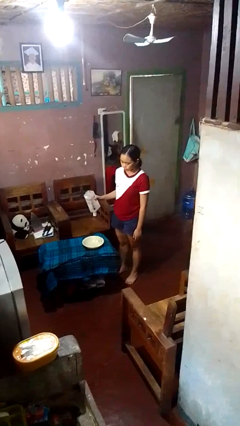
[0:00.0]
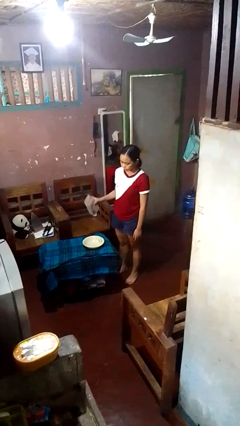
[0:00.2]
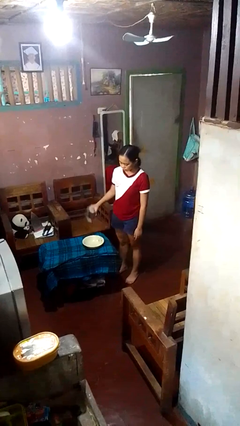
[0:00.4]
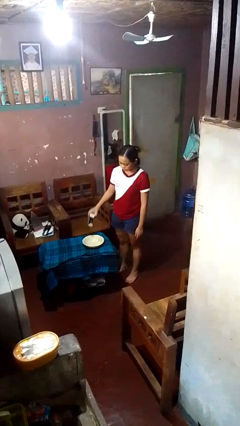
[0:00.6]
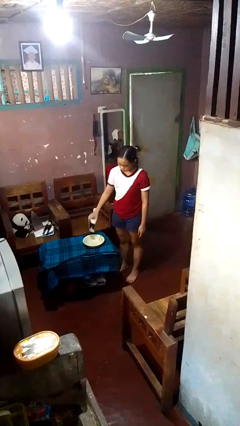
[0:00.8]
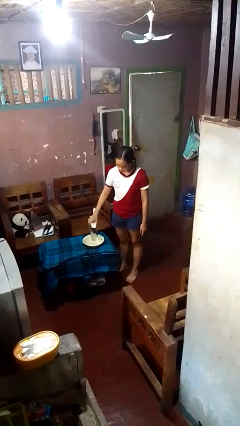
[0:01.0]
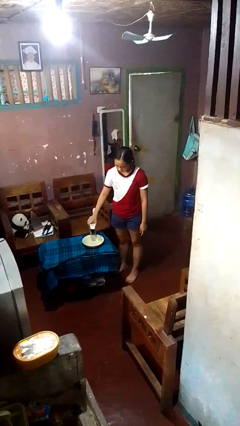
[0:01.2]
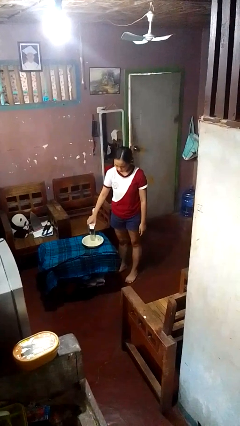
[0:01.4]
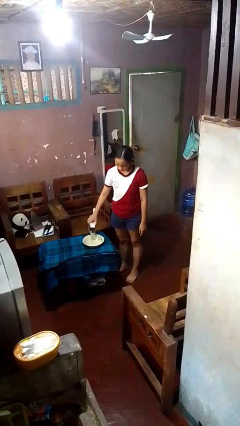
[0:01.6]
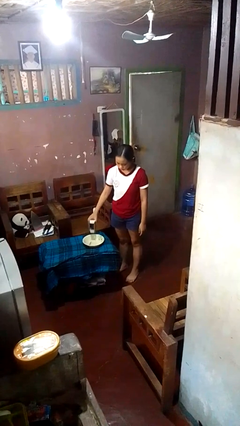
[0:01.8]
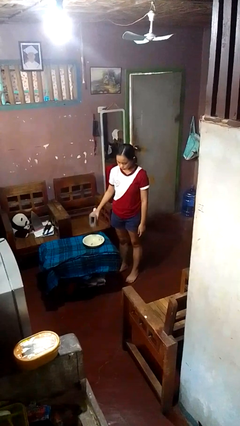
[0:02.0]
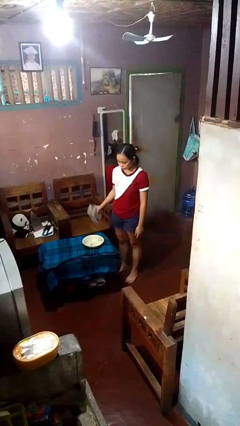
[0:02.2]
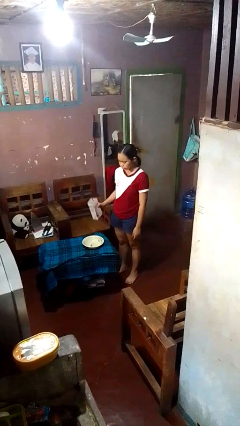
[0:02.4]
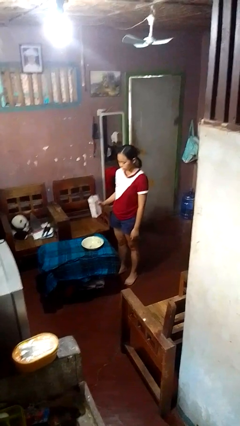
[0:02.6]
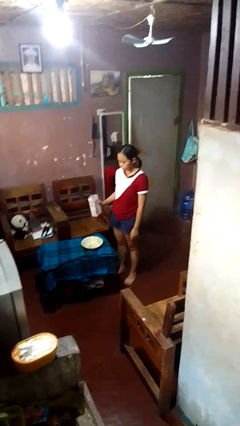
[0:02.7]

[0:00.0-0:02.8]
person pours into bowl

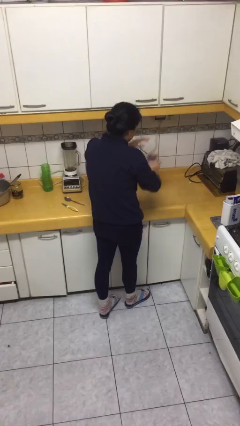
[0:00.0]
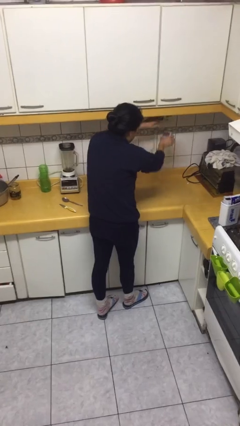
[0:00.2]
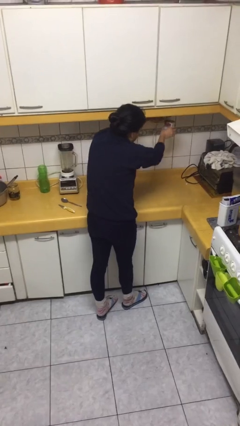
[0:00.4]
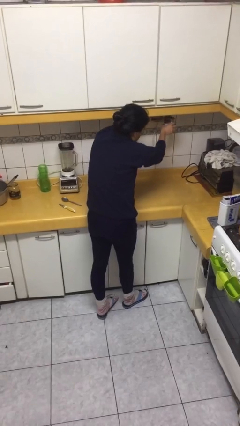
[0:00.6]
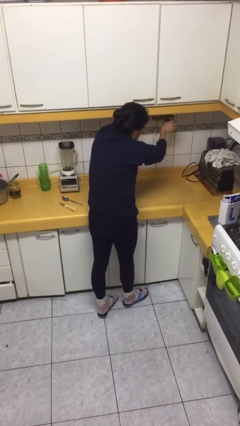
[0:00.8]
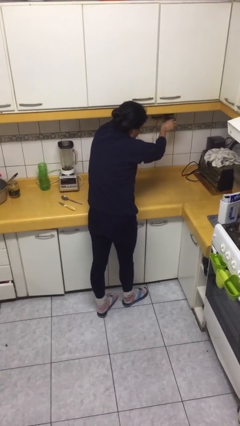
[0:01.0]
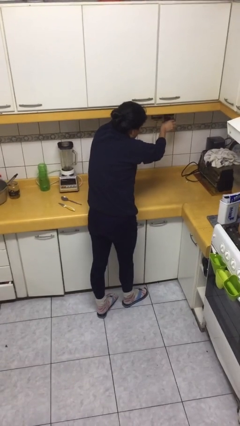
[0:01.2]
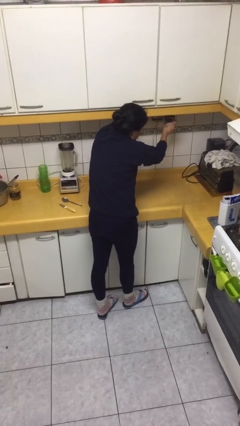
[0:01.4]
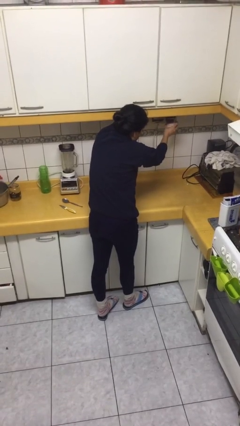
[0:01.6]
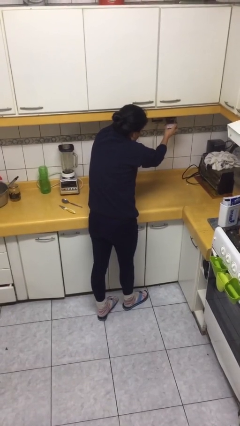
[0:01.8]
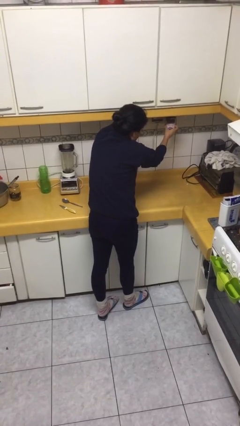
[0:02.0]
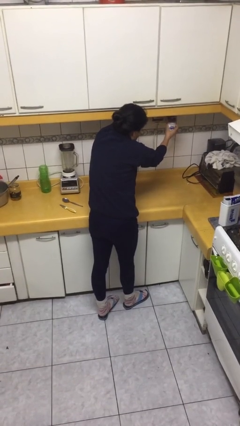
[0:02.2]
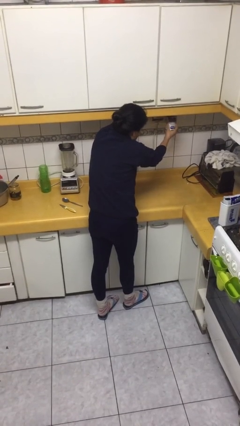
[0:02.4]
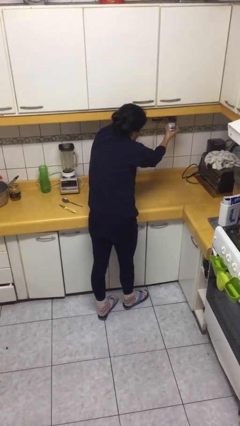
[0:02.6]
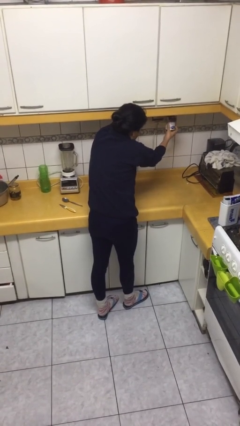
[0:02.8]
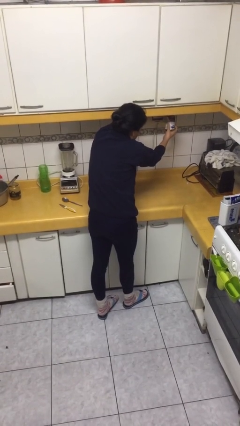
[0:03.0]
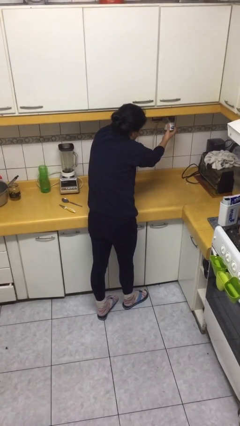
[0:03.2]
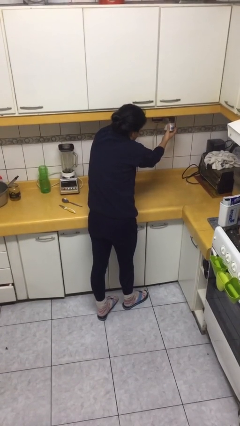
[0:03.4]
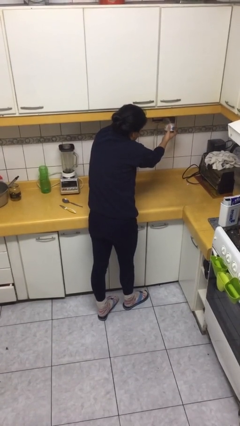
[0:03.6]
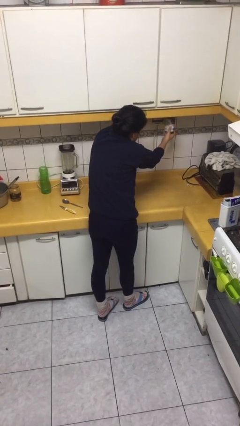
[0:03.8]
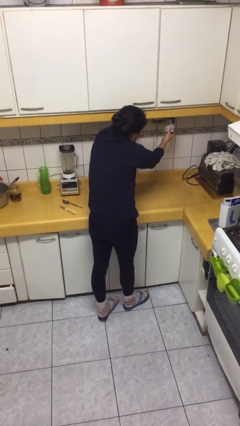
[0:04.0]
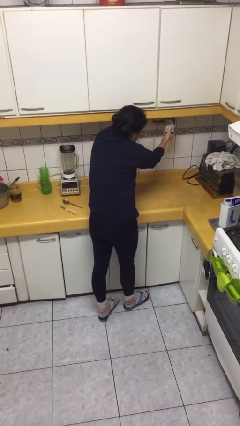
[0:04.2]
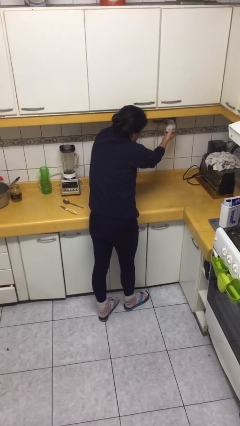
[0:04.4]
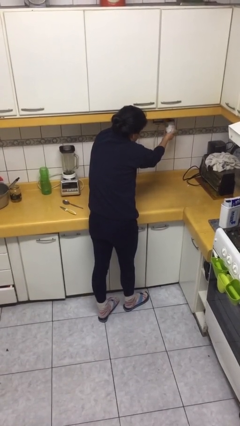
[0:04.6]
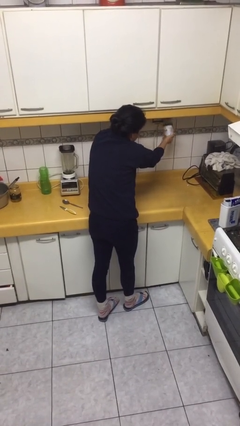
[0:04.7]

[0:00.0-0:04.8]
person opens can with can opener

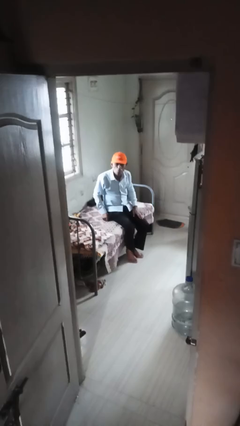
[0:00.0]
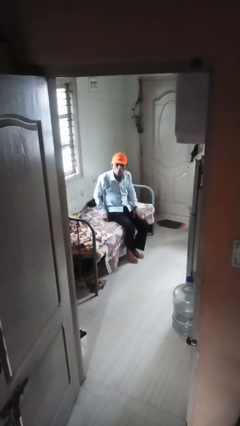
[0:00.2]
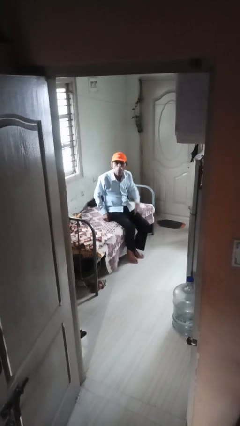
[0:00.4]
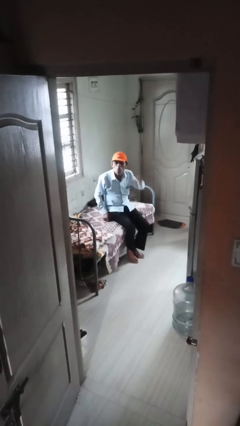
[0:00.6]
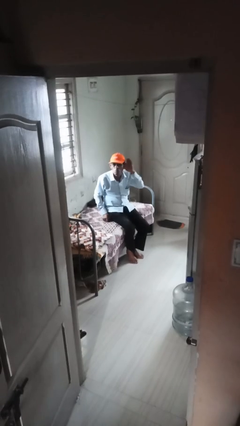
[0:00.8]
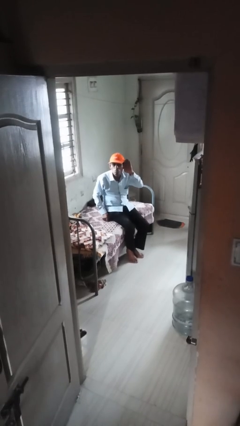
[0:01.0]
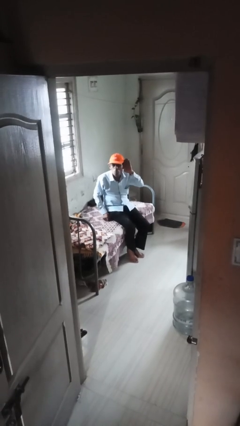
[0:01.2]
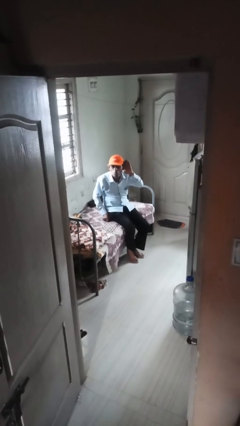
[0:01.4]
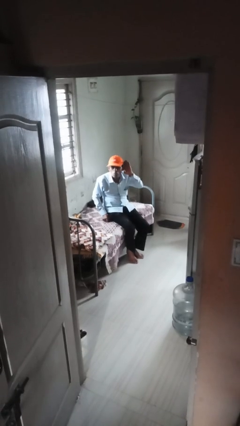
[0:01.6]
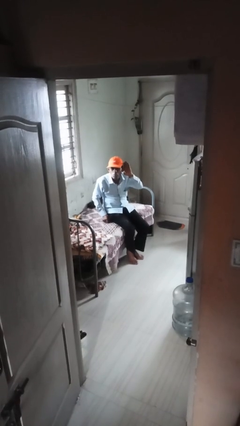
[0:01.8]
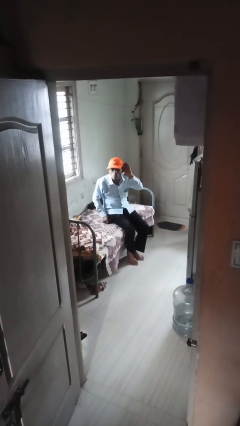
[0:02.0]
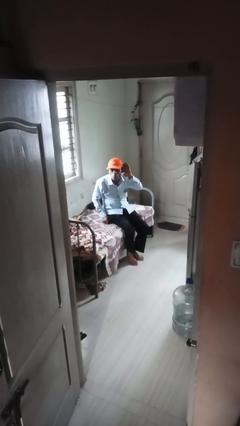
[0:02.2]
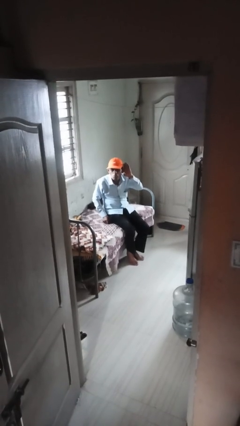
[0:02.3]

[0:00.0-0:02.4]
person gestures listen closely

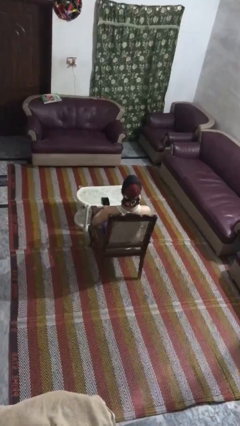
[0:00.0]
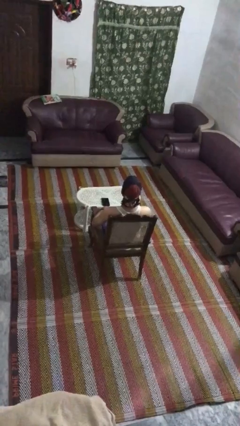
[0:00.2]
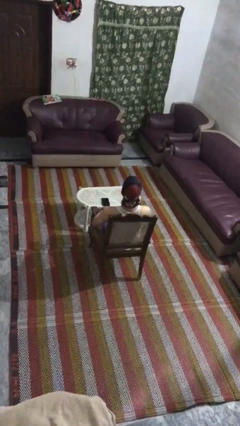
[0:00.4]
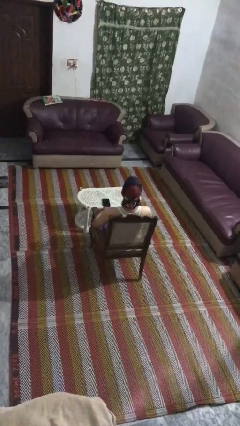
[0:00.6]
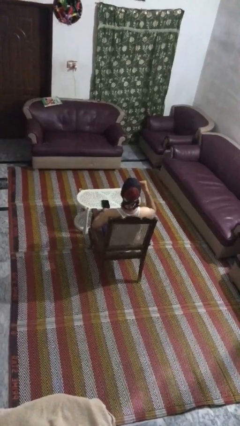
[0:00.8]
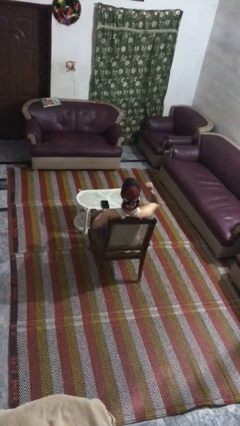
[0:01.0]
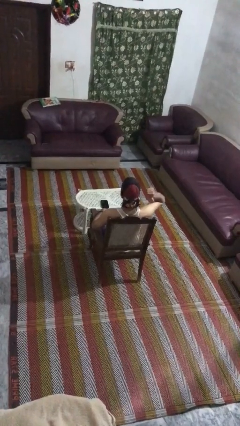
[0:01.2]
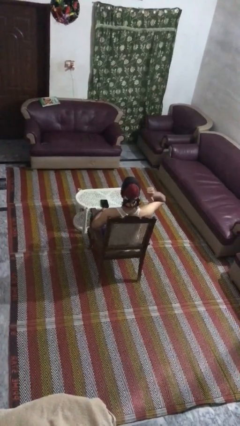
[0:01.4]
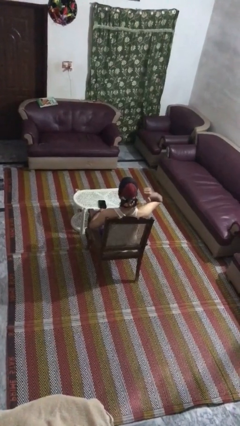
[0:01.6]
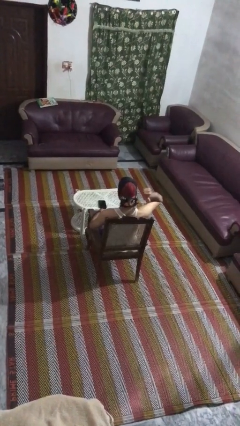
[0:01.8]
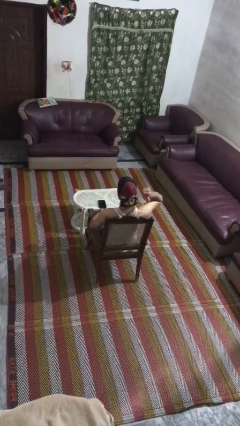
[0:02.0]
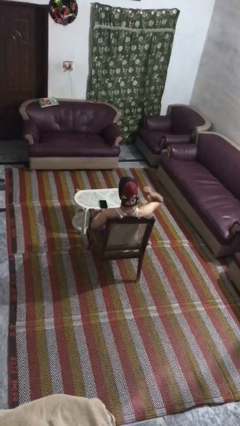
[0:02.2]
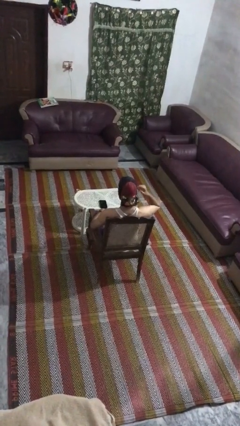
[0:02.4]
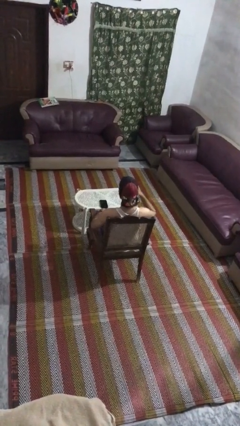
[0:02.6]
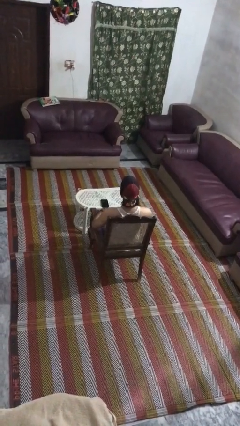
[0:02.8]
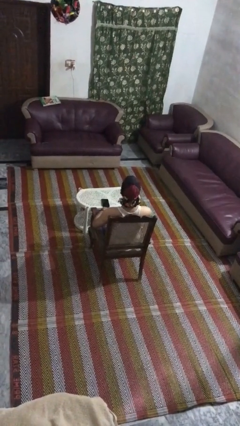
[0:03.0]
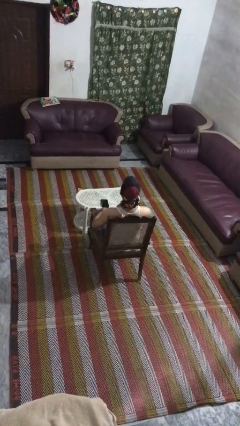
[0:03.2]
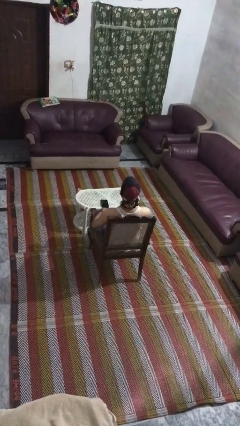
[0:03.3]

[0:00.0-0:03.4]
person gestures behind me

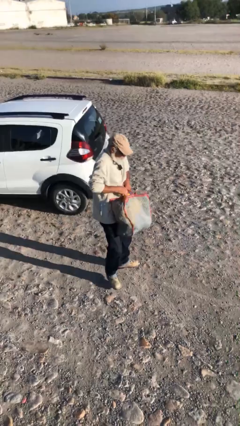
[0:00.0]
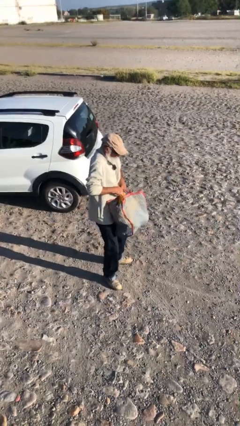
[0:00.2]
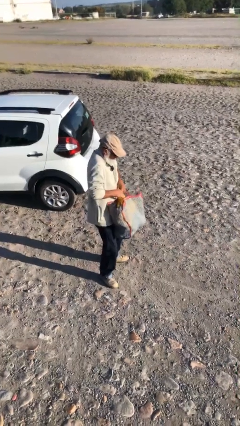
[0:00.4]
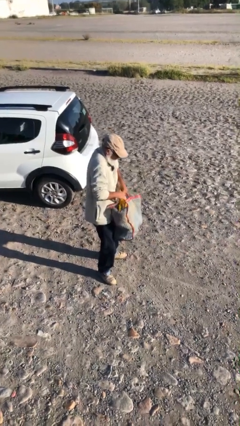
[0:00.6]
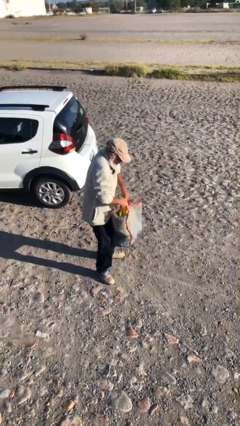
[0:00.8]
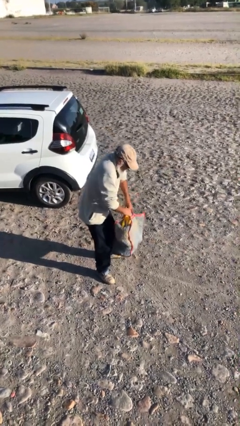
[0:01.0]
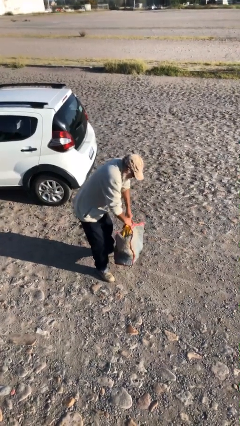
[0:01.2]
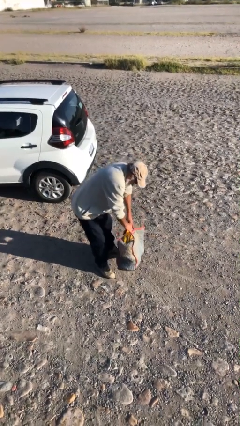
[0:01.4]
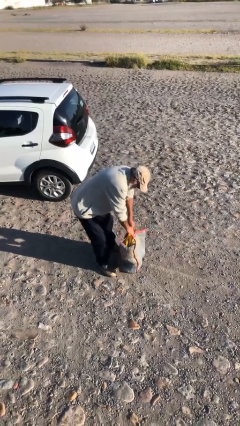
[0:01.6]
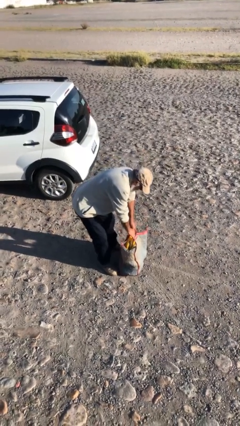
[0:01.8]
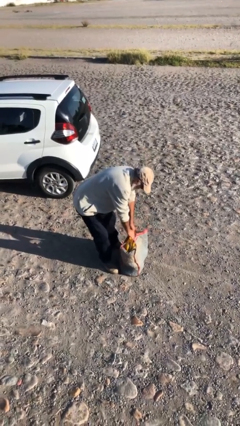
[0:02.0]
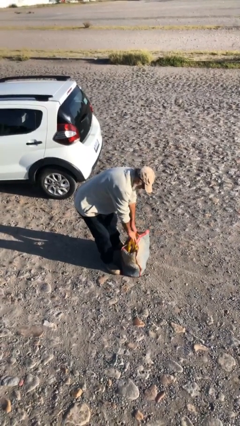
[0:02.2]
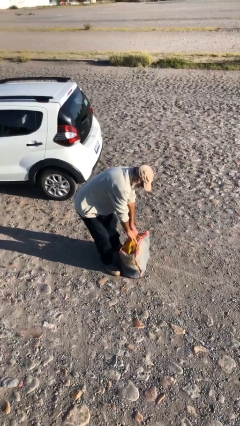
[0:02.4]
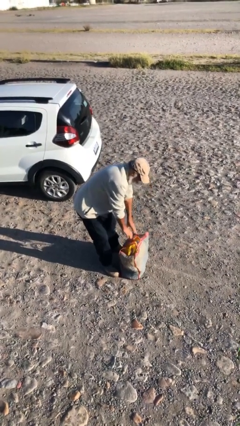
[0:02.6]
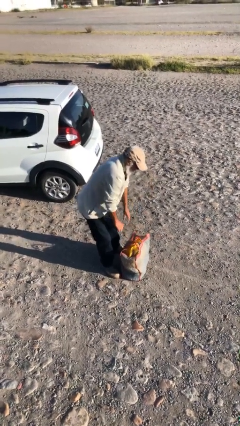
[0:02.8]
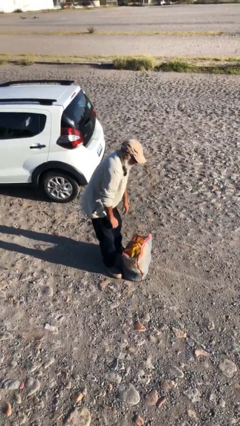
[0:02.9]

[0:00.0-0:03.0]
person puts down object on floor

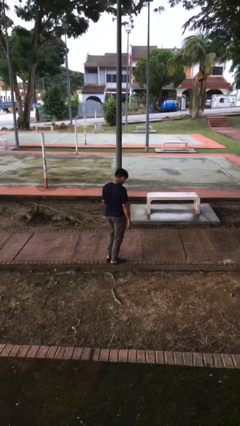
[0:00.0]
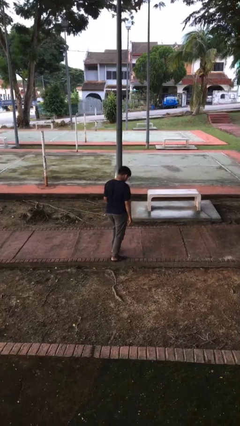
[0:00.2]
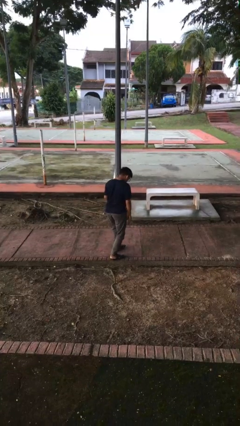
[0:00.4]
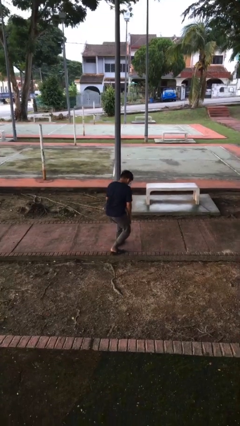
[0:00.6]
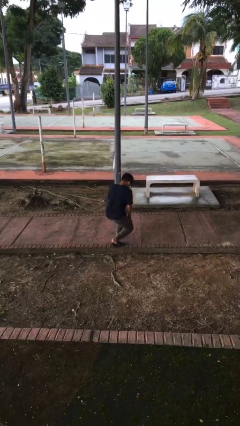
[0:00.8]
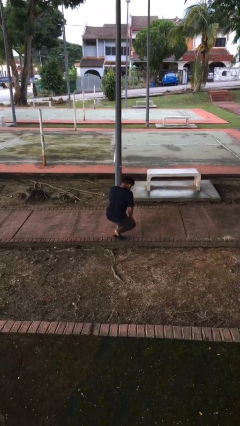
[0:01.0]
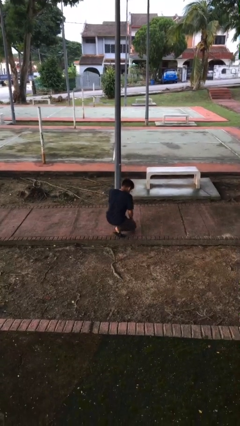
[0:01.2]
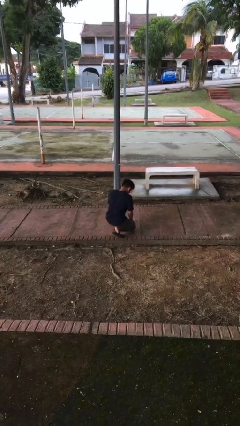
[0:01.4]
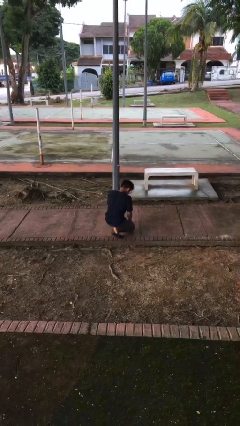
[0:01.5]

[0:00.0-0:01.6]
person kneels
